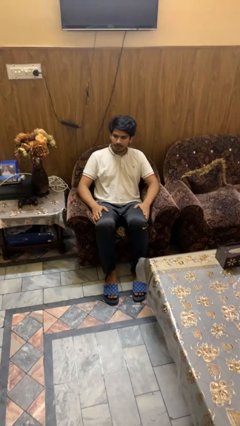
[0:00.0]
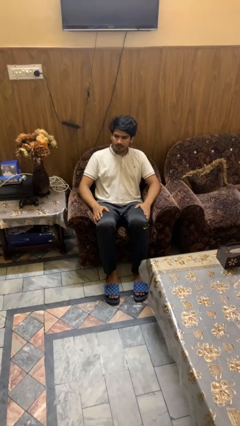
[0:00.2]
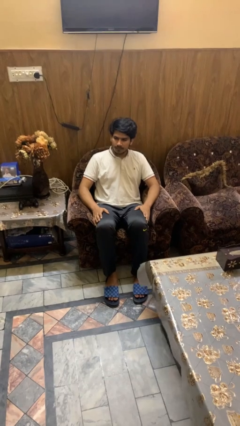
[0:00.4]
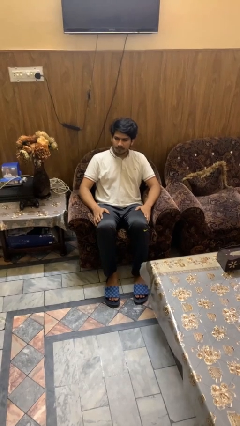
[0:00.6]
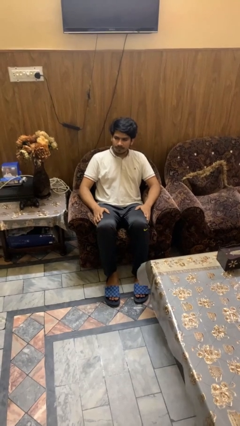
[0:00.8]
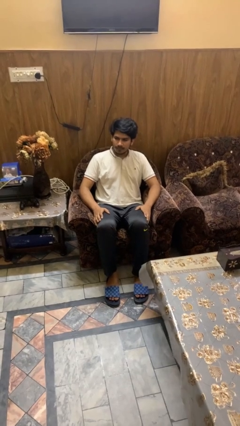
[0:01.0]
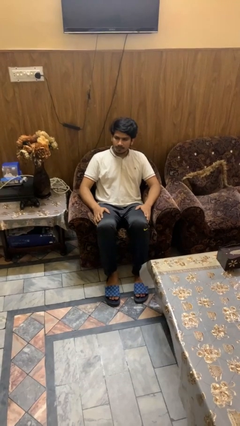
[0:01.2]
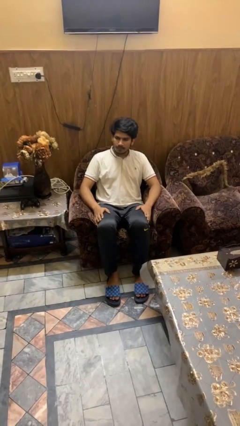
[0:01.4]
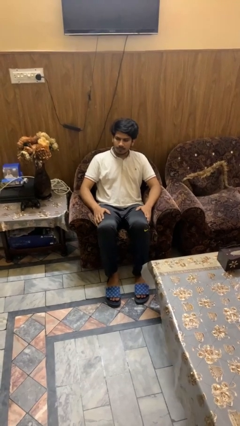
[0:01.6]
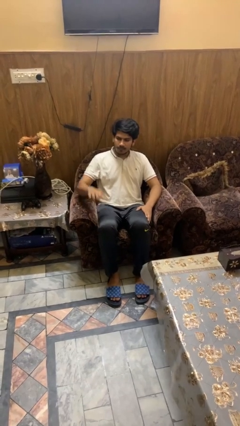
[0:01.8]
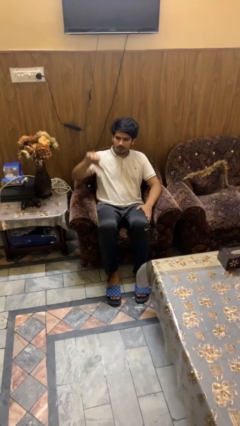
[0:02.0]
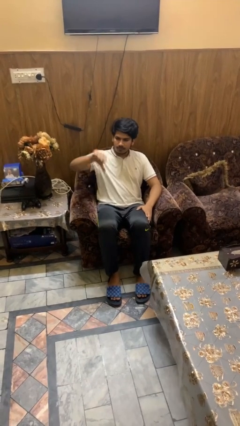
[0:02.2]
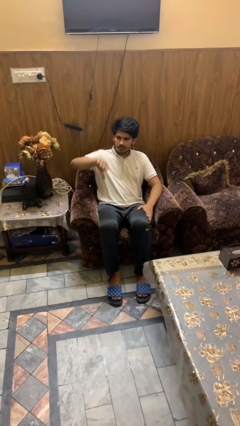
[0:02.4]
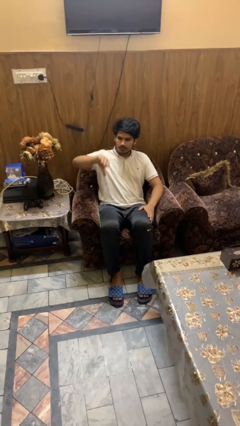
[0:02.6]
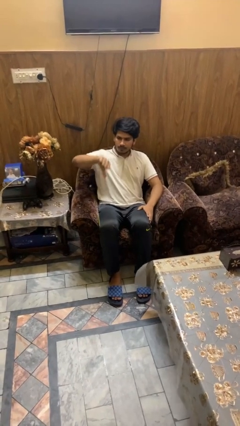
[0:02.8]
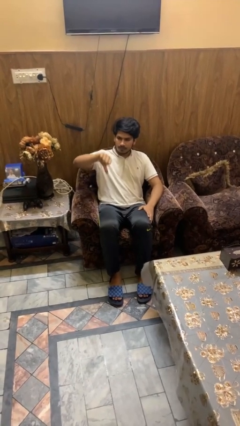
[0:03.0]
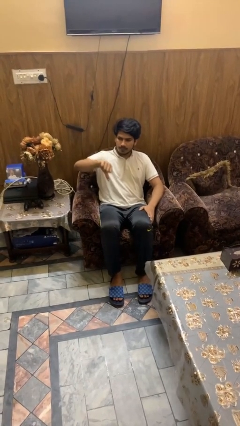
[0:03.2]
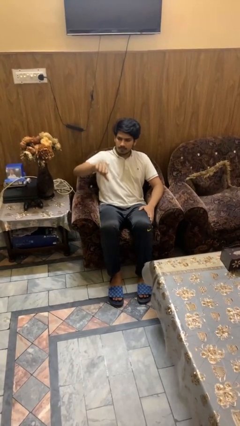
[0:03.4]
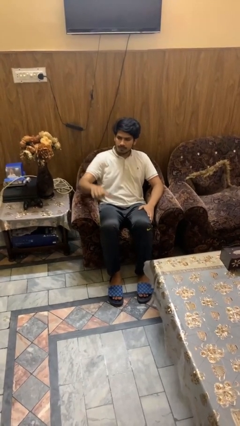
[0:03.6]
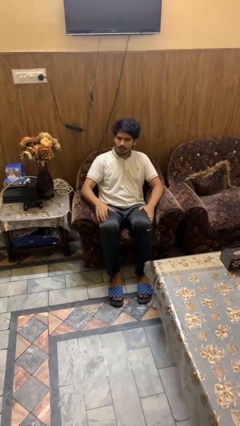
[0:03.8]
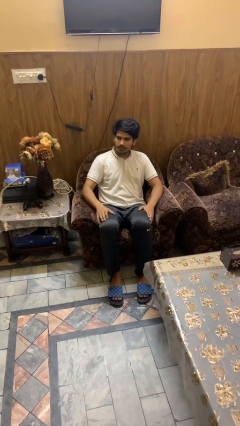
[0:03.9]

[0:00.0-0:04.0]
person gestures thumbs down

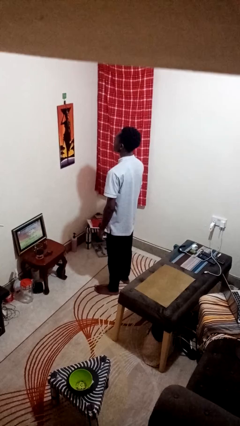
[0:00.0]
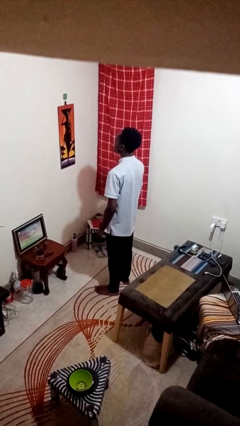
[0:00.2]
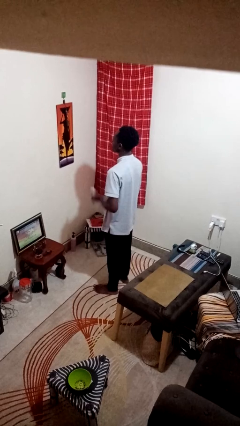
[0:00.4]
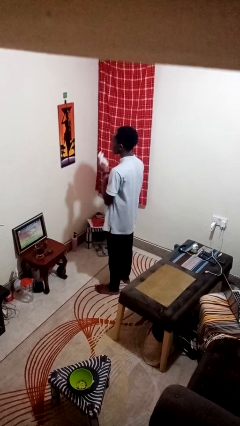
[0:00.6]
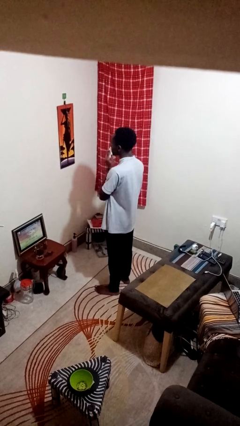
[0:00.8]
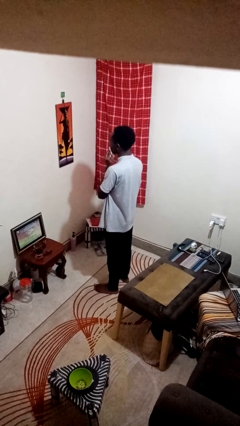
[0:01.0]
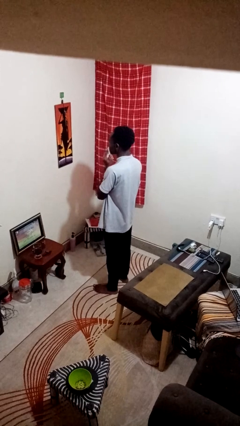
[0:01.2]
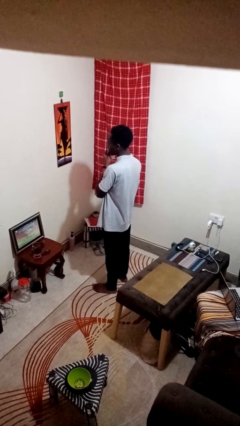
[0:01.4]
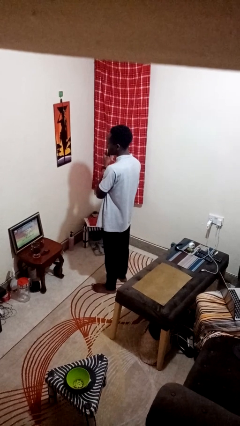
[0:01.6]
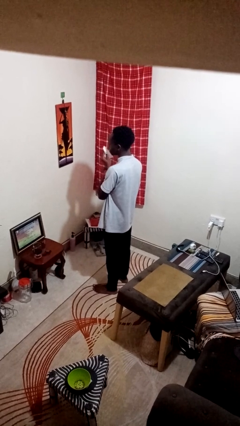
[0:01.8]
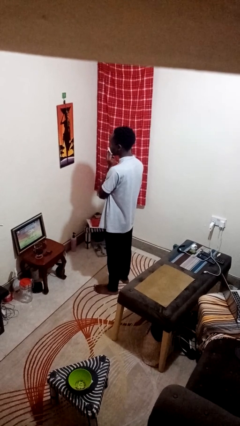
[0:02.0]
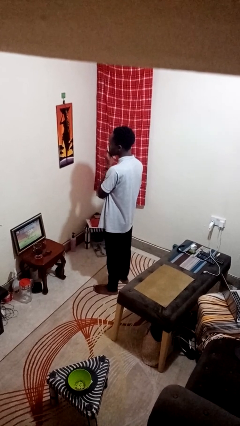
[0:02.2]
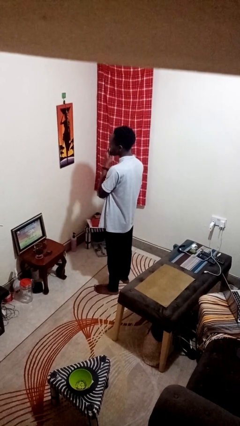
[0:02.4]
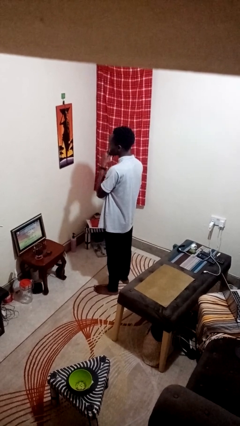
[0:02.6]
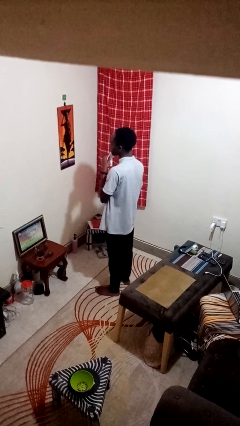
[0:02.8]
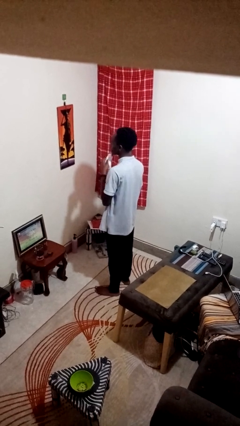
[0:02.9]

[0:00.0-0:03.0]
person wipes mouth with napkin

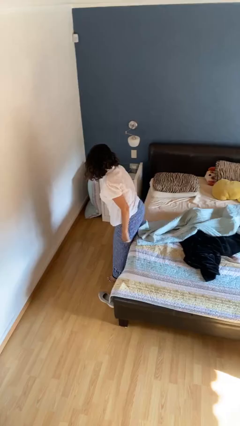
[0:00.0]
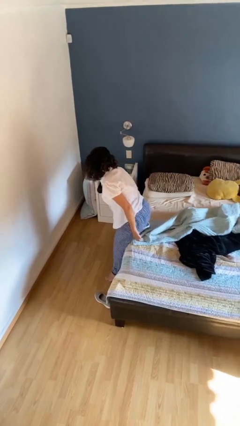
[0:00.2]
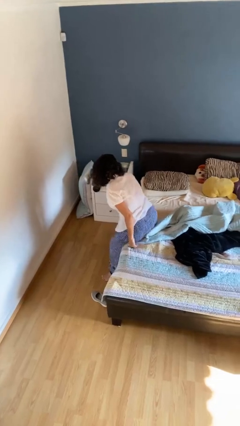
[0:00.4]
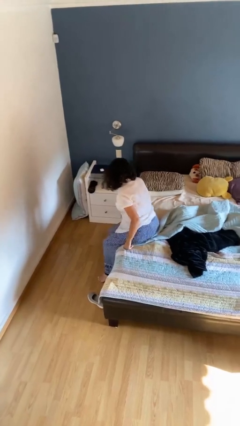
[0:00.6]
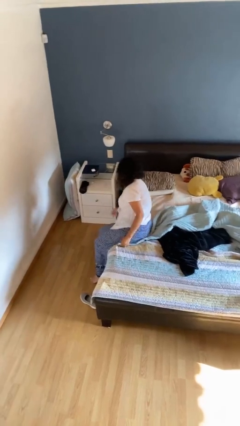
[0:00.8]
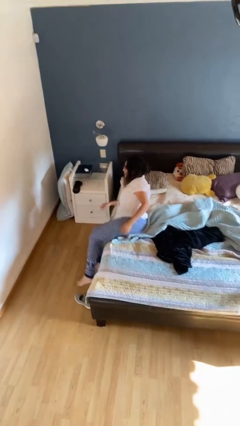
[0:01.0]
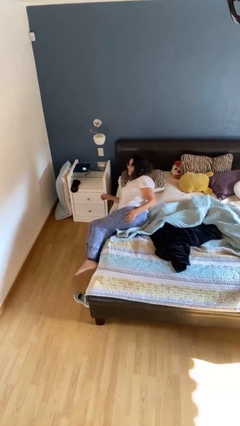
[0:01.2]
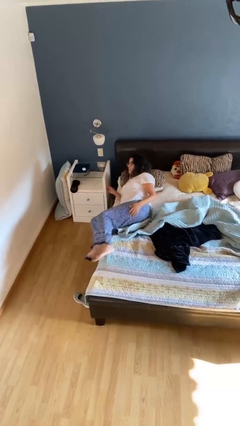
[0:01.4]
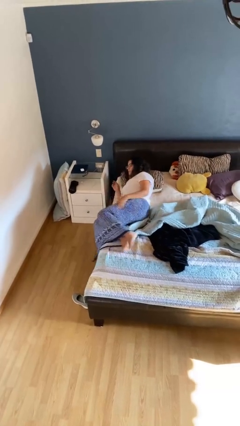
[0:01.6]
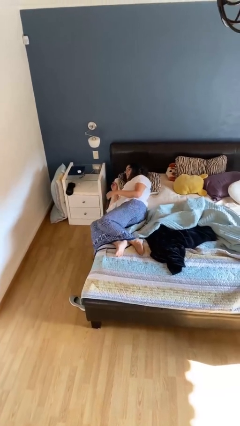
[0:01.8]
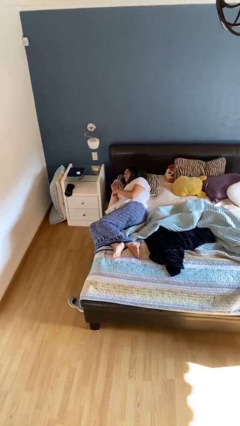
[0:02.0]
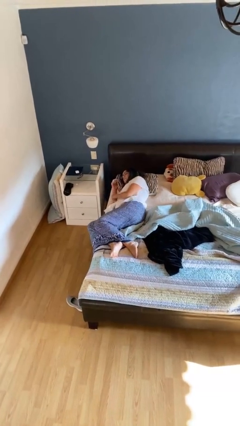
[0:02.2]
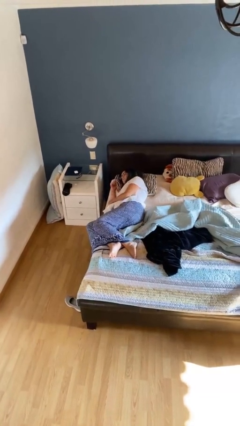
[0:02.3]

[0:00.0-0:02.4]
person lies down on bed

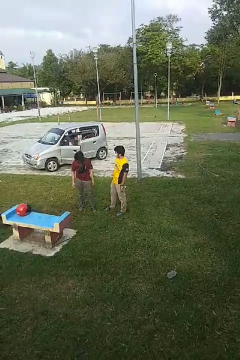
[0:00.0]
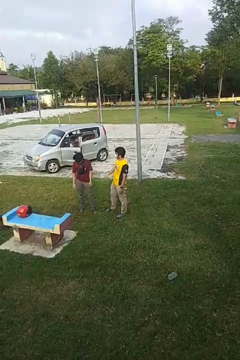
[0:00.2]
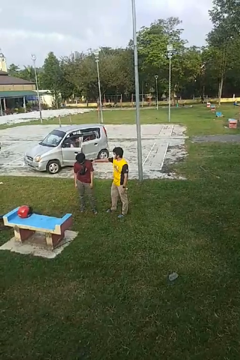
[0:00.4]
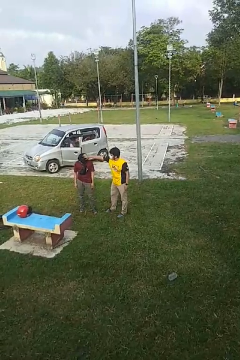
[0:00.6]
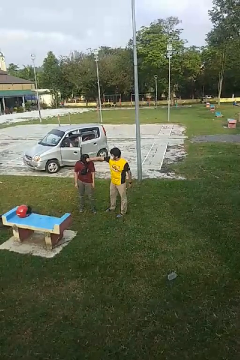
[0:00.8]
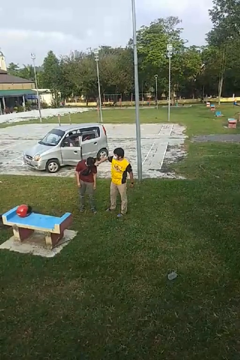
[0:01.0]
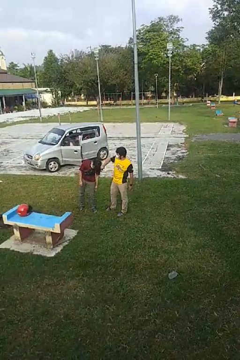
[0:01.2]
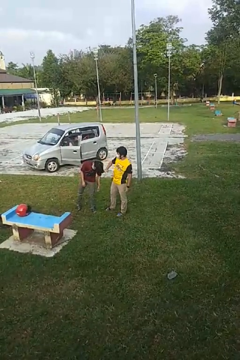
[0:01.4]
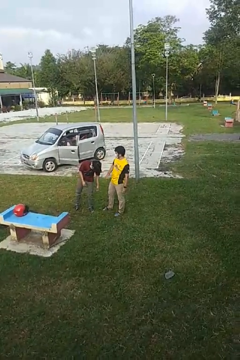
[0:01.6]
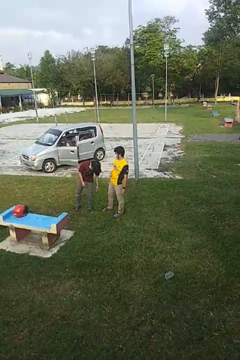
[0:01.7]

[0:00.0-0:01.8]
person grabs person by hair

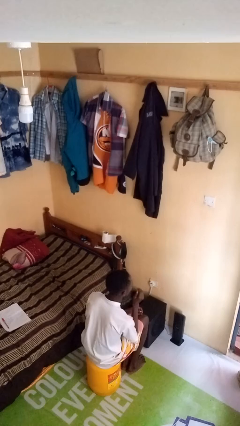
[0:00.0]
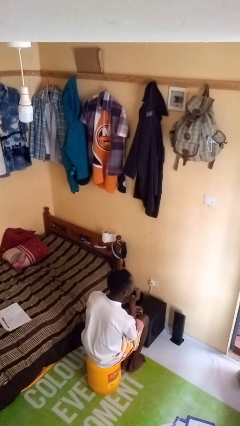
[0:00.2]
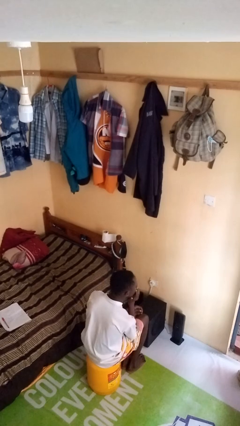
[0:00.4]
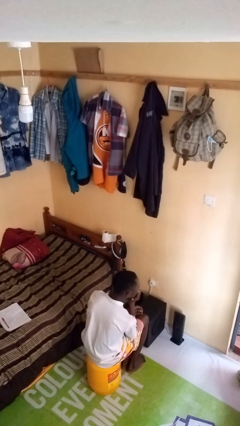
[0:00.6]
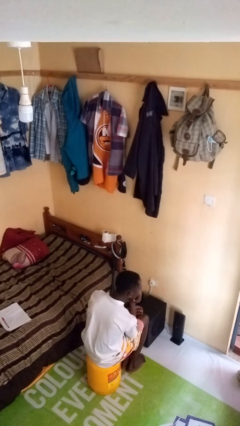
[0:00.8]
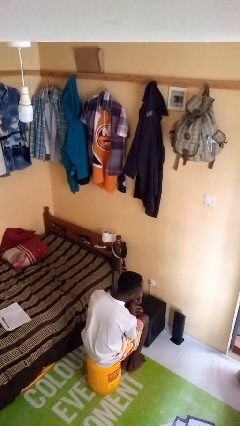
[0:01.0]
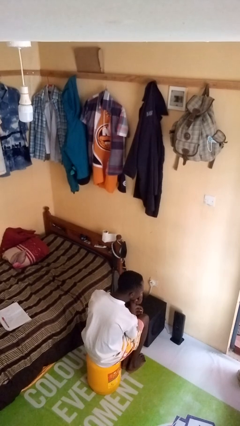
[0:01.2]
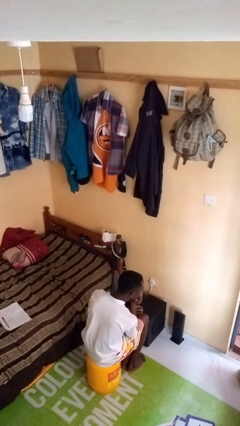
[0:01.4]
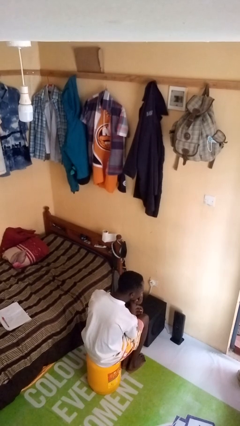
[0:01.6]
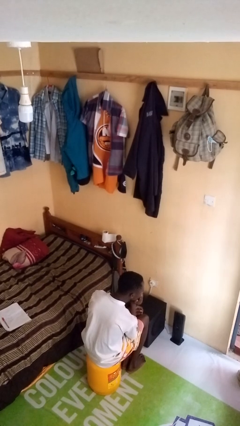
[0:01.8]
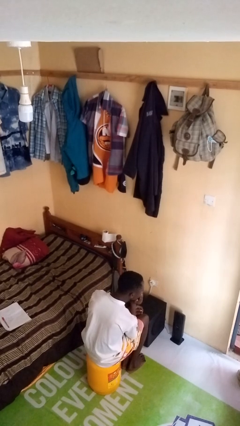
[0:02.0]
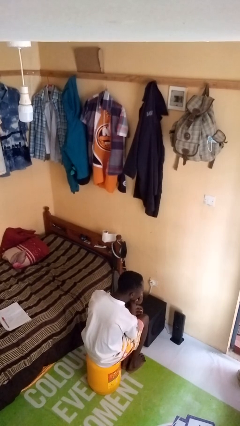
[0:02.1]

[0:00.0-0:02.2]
person strokes chin

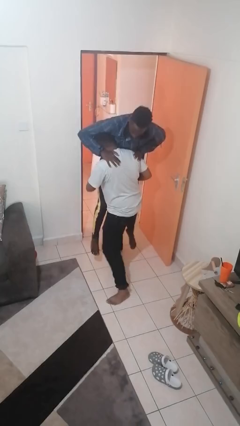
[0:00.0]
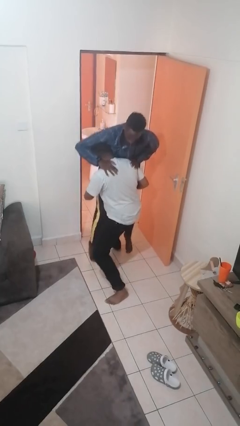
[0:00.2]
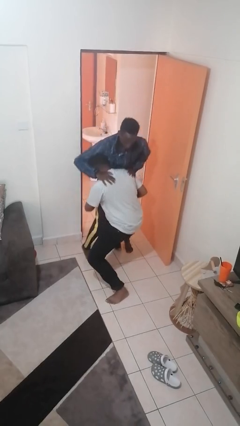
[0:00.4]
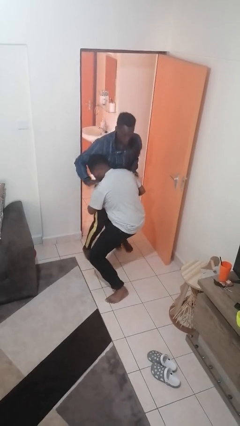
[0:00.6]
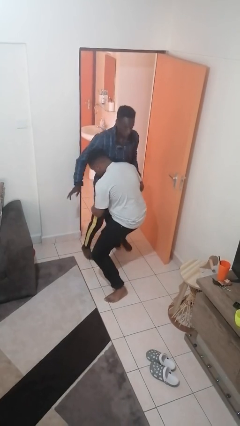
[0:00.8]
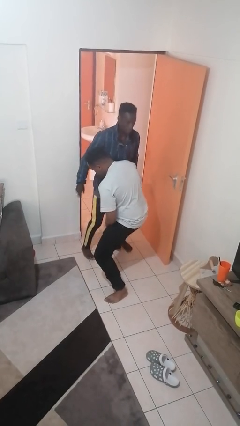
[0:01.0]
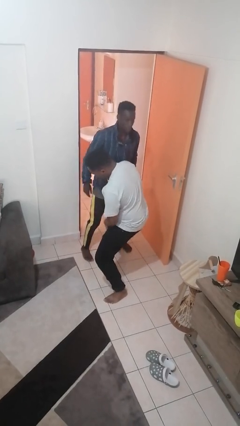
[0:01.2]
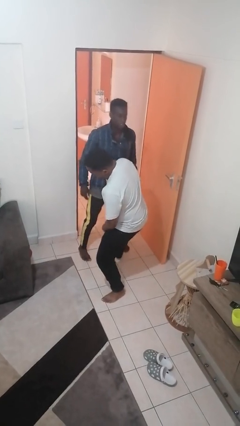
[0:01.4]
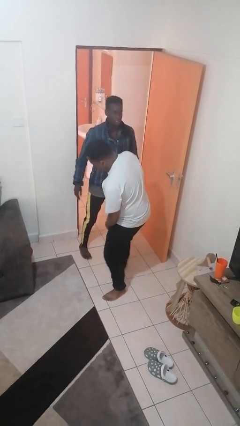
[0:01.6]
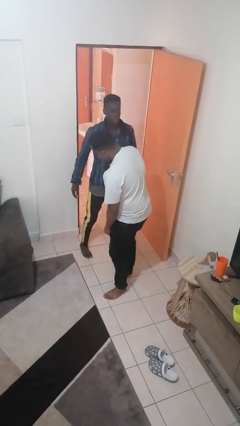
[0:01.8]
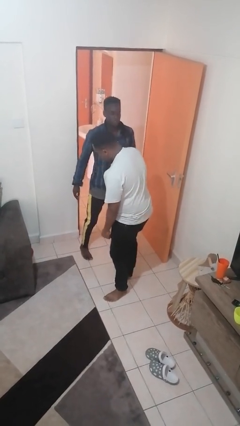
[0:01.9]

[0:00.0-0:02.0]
person puts down person

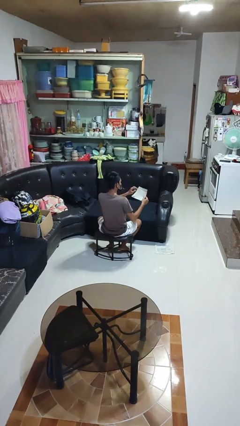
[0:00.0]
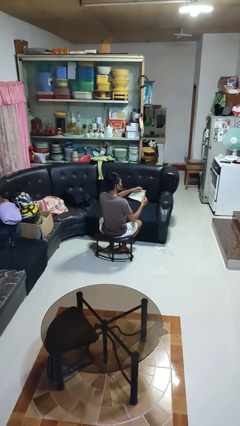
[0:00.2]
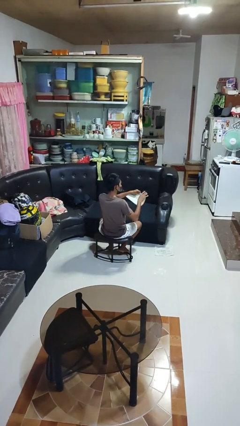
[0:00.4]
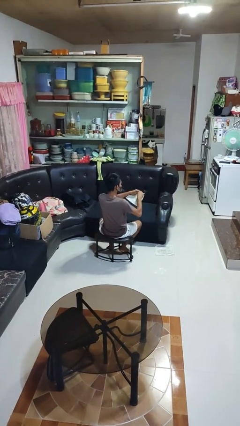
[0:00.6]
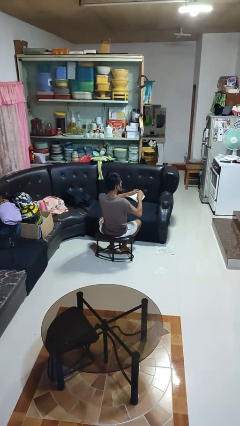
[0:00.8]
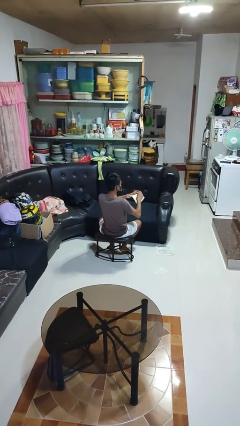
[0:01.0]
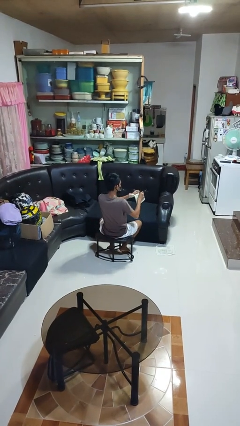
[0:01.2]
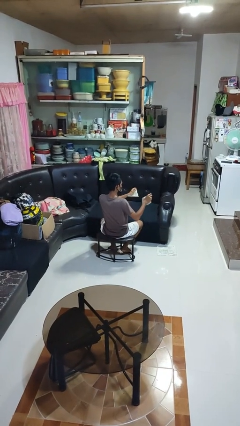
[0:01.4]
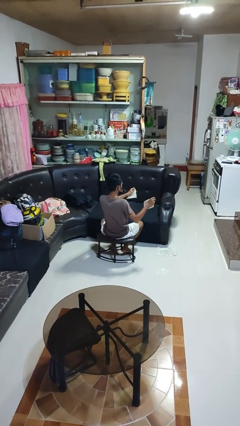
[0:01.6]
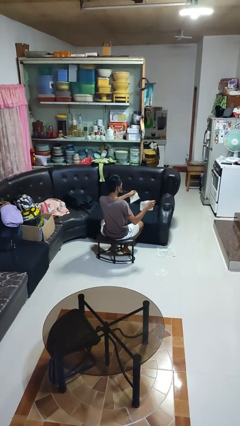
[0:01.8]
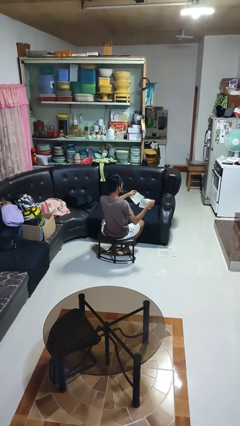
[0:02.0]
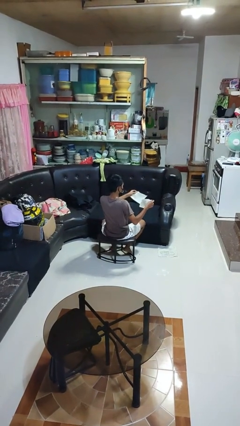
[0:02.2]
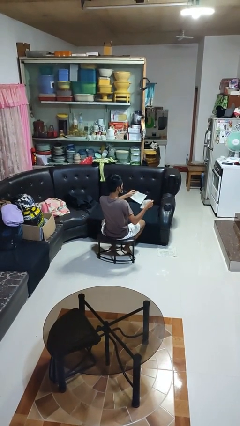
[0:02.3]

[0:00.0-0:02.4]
person tears paper
